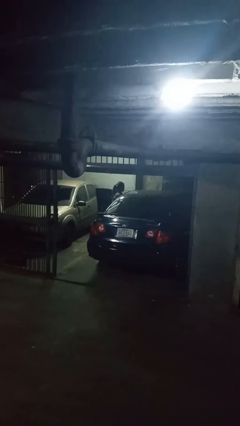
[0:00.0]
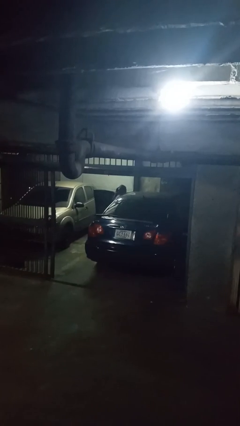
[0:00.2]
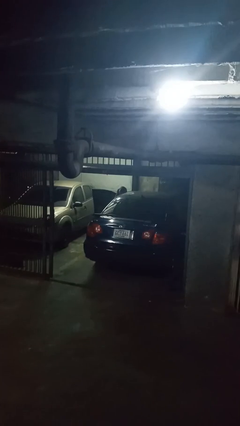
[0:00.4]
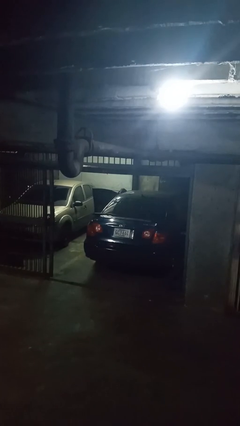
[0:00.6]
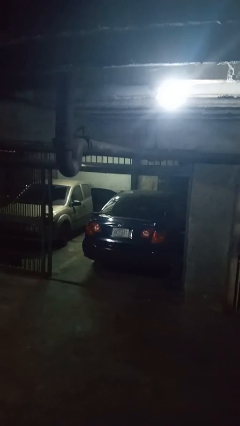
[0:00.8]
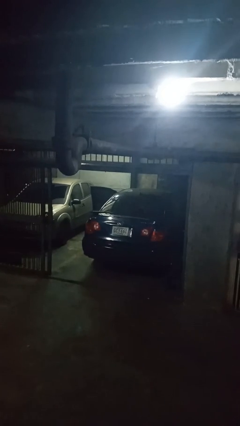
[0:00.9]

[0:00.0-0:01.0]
person loads car

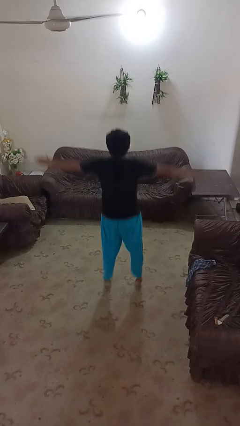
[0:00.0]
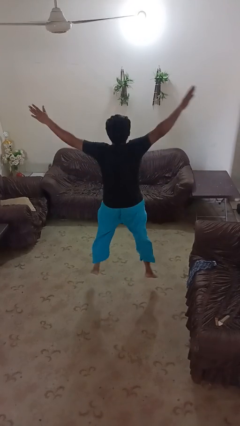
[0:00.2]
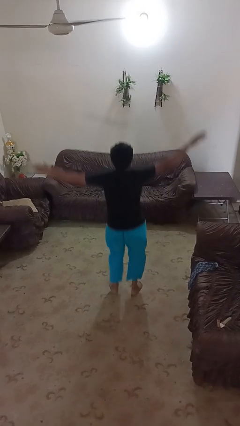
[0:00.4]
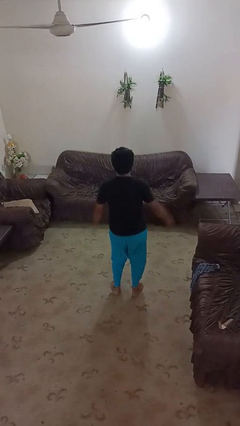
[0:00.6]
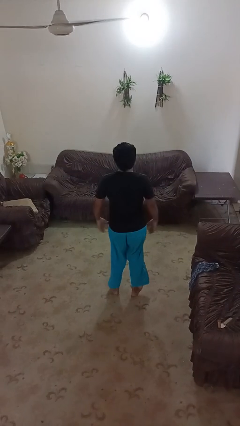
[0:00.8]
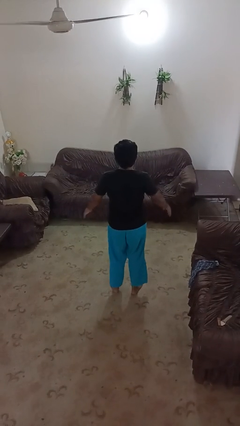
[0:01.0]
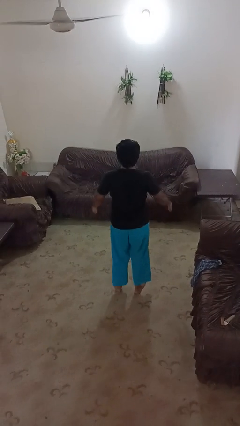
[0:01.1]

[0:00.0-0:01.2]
person exercises with jumping jacks

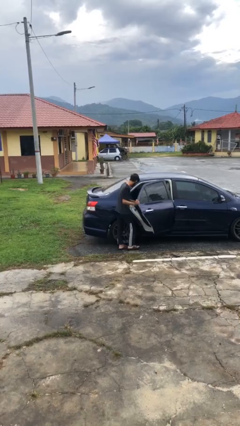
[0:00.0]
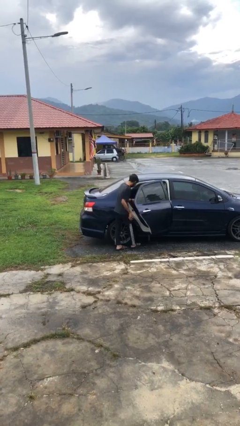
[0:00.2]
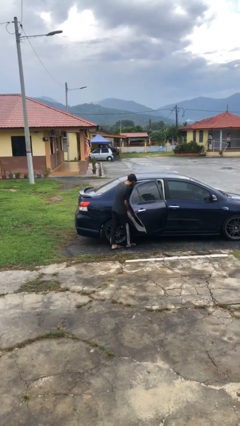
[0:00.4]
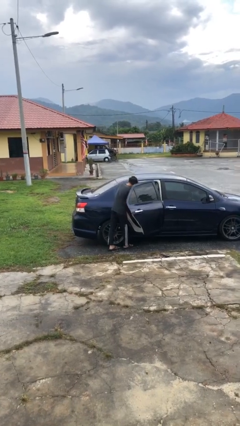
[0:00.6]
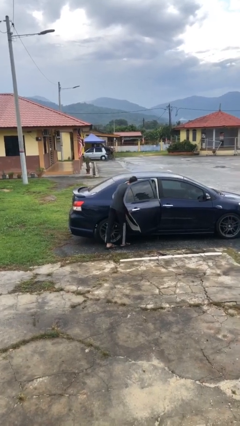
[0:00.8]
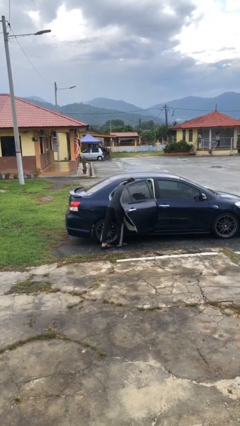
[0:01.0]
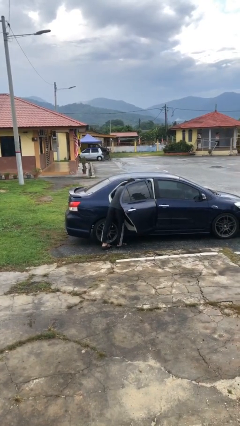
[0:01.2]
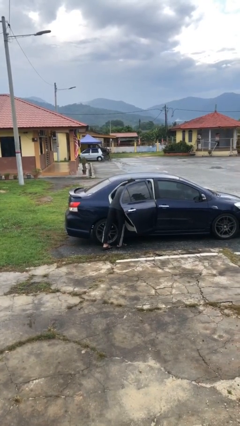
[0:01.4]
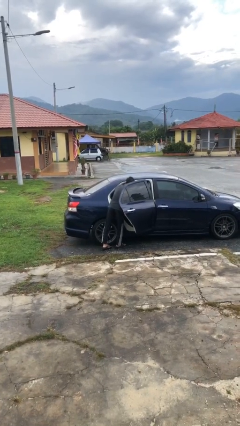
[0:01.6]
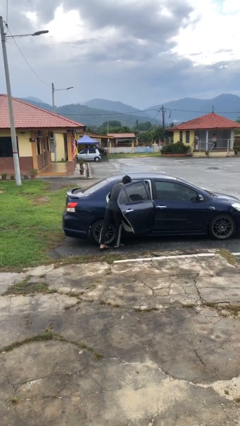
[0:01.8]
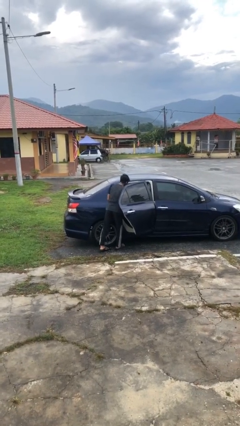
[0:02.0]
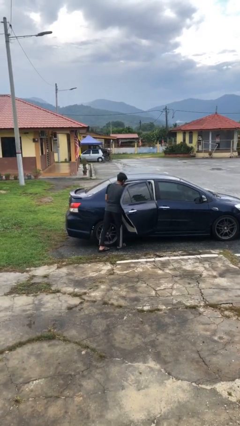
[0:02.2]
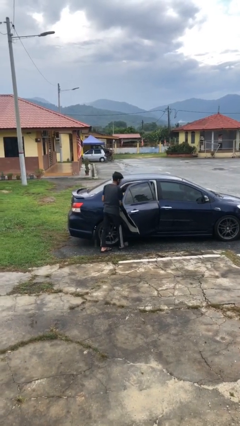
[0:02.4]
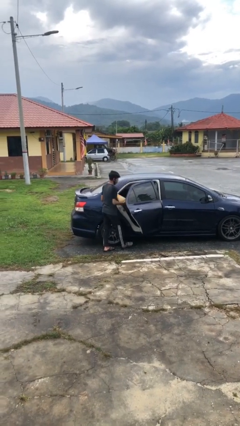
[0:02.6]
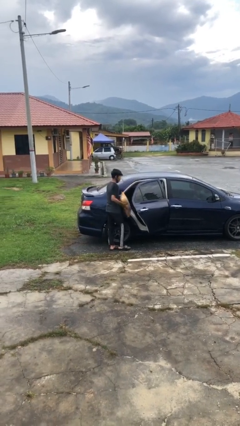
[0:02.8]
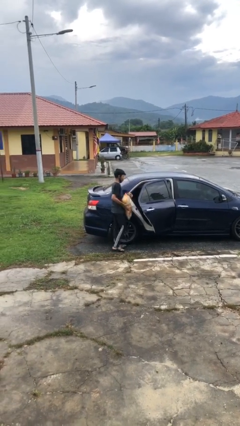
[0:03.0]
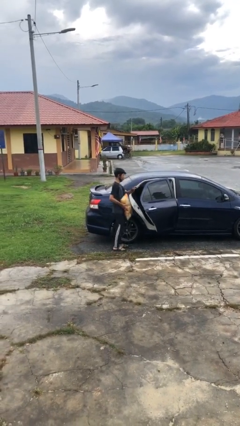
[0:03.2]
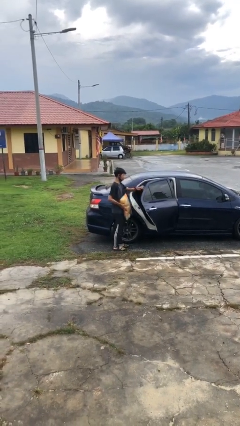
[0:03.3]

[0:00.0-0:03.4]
person unloads car

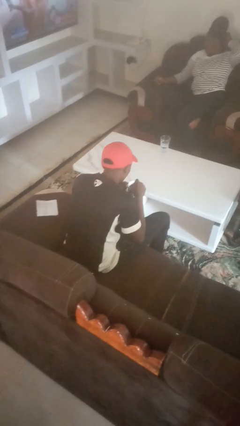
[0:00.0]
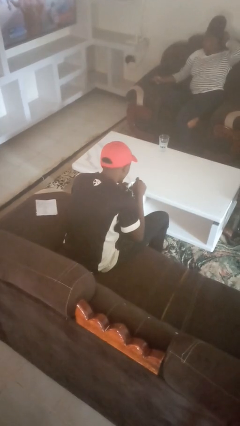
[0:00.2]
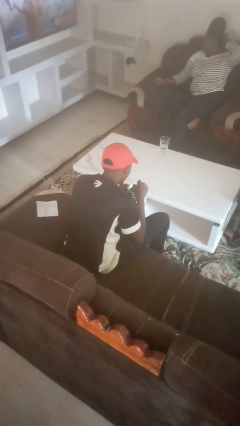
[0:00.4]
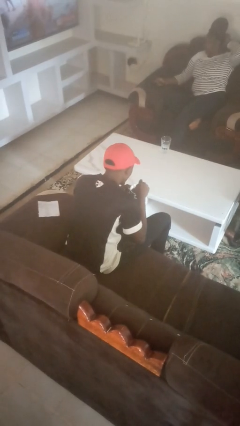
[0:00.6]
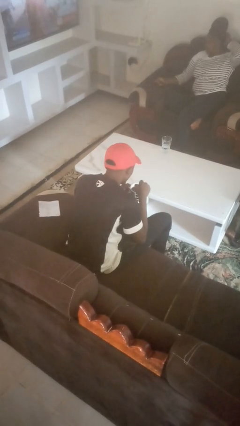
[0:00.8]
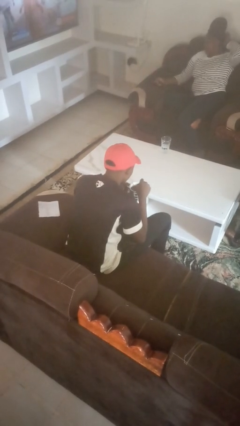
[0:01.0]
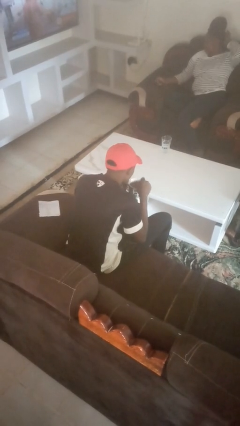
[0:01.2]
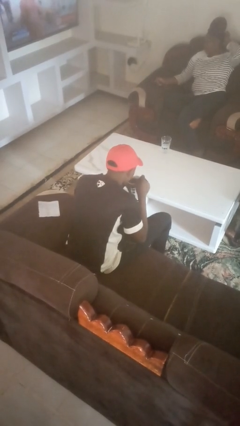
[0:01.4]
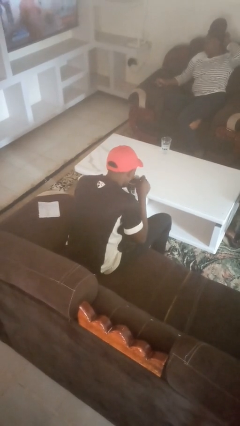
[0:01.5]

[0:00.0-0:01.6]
person stirs mug

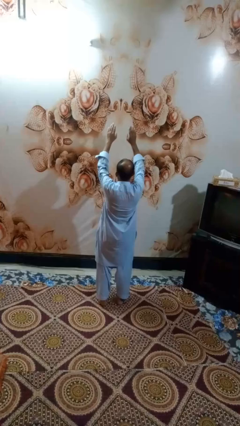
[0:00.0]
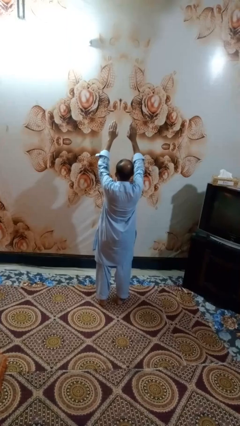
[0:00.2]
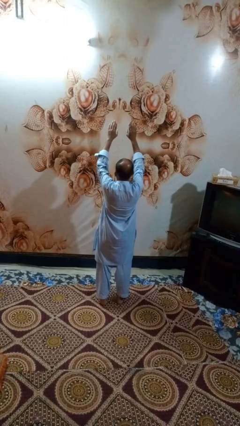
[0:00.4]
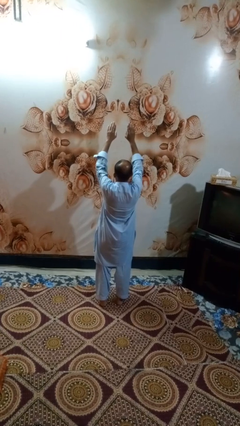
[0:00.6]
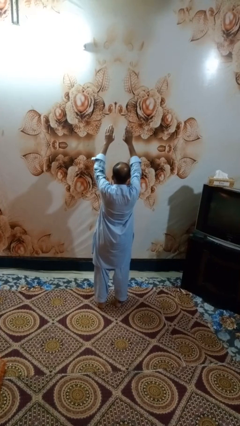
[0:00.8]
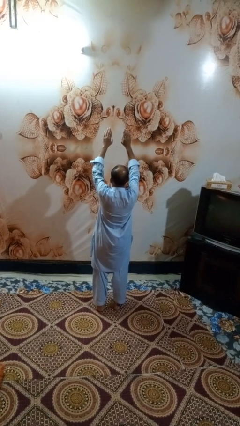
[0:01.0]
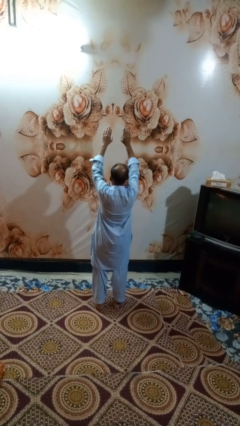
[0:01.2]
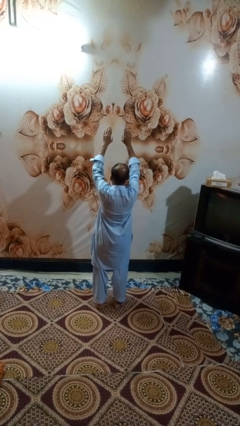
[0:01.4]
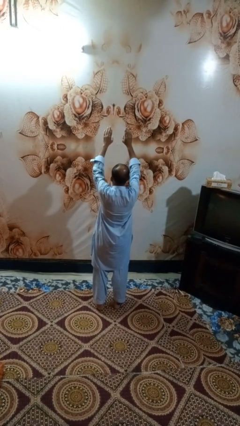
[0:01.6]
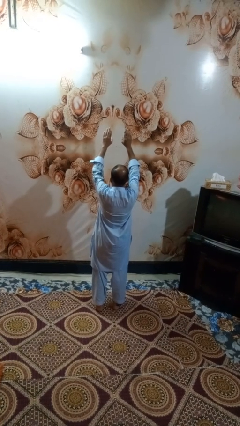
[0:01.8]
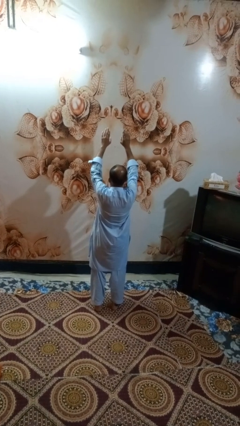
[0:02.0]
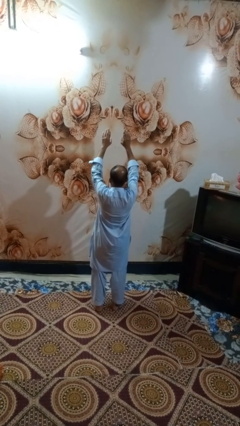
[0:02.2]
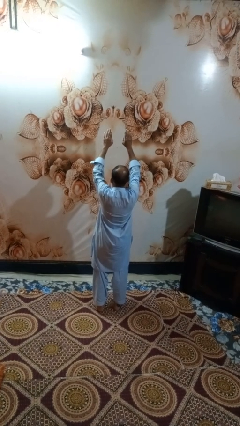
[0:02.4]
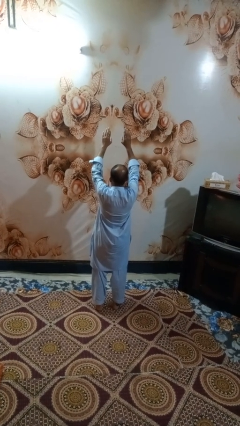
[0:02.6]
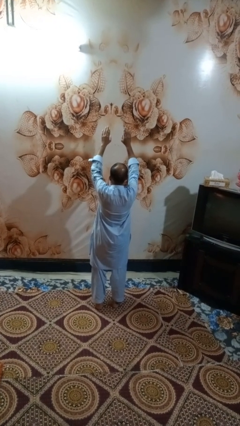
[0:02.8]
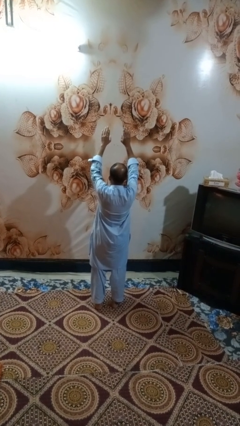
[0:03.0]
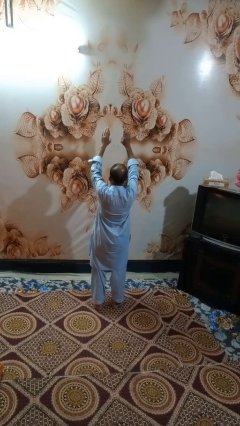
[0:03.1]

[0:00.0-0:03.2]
person gestures swipe up

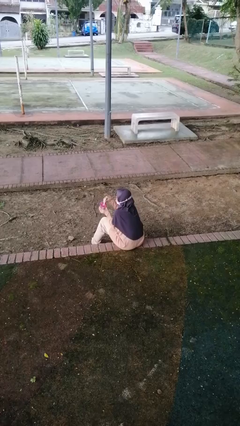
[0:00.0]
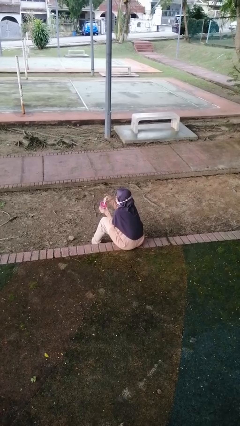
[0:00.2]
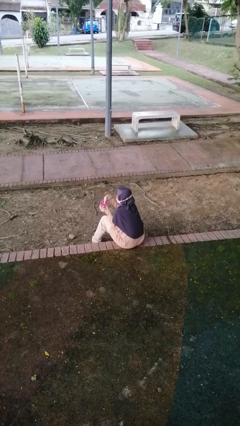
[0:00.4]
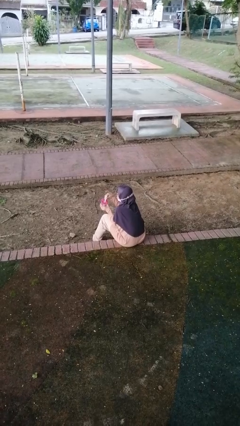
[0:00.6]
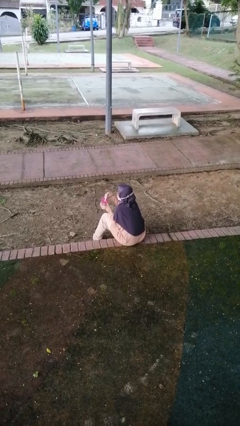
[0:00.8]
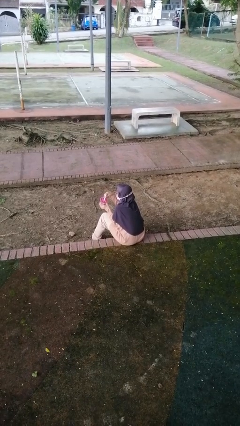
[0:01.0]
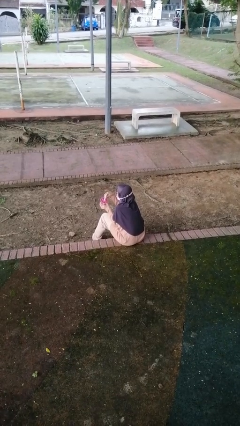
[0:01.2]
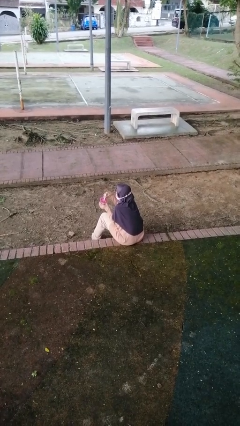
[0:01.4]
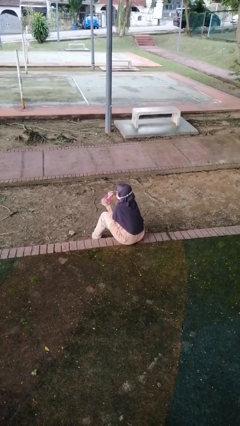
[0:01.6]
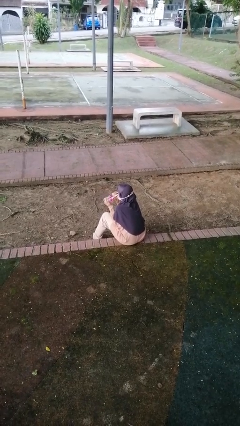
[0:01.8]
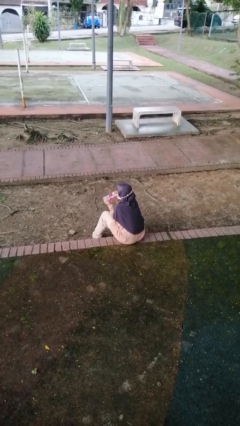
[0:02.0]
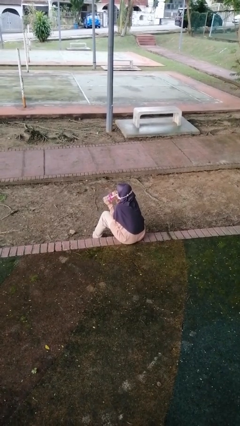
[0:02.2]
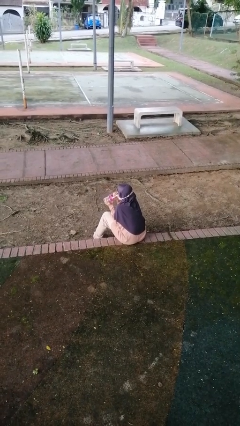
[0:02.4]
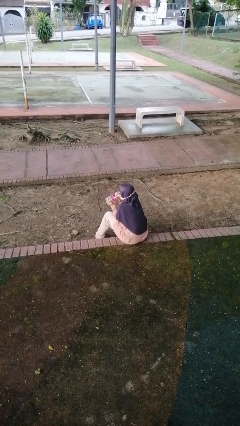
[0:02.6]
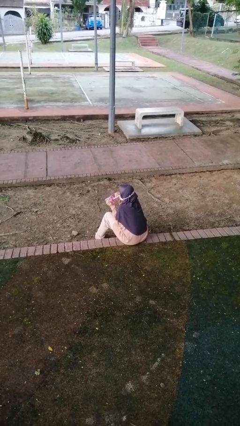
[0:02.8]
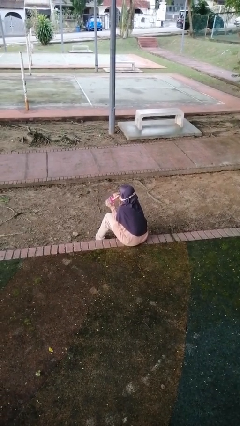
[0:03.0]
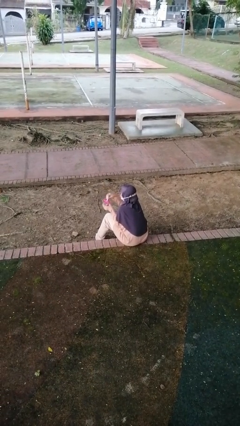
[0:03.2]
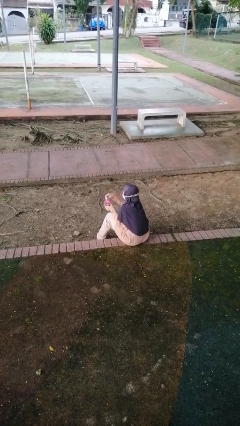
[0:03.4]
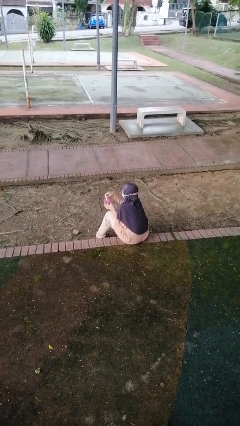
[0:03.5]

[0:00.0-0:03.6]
person drinks from straw

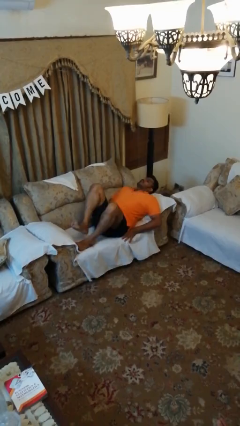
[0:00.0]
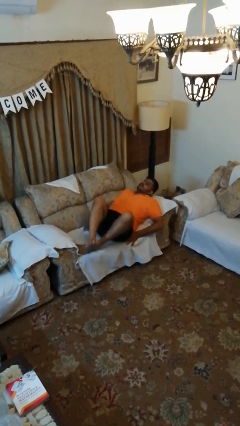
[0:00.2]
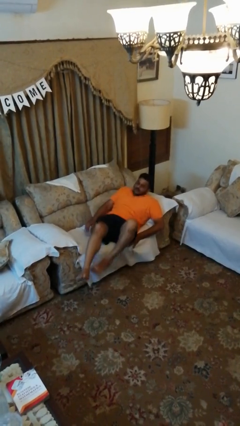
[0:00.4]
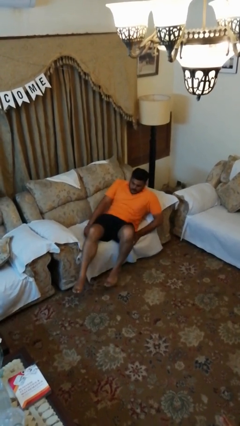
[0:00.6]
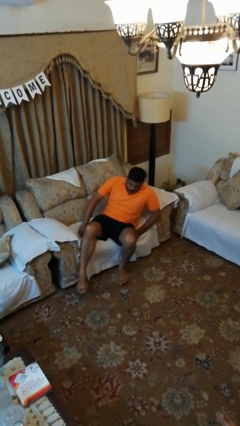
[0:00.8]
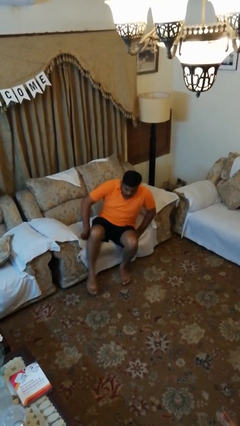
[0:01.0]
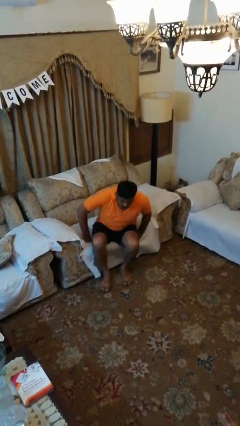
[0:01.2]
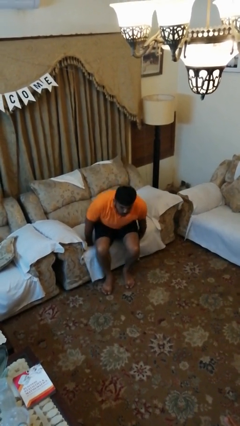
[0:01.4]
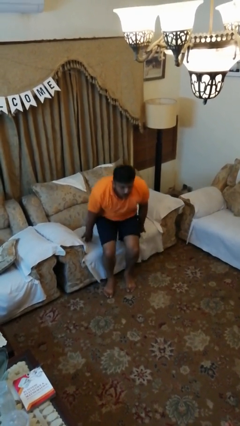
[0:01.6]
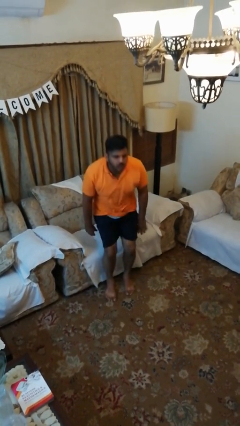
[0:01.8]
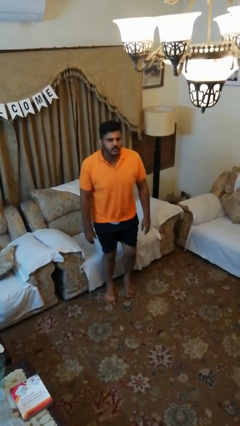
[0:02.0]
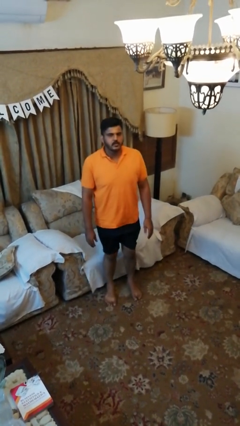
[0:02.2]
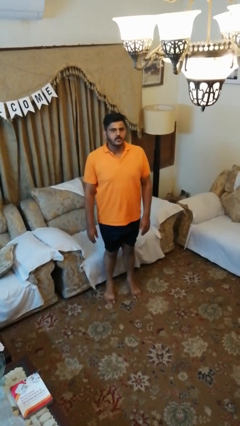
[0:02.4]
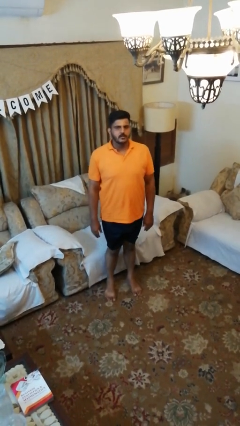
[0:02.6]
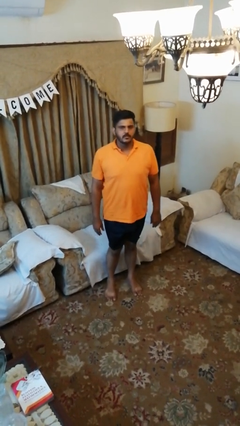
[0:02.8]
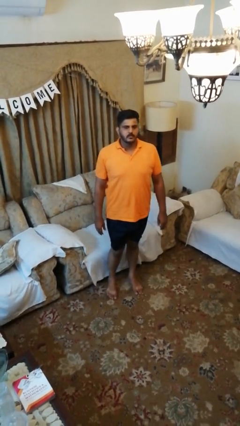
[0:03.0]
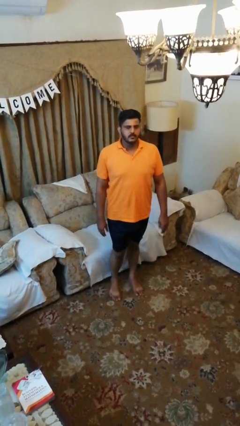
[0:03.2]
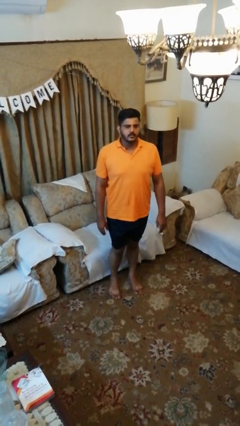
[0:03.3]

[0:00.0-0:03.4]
person stands up
